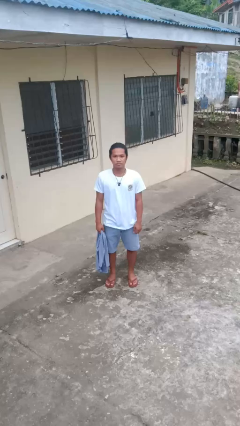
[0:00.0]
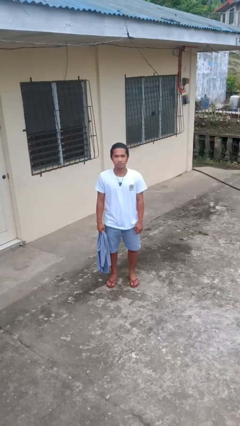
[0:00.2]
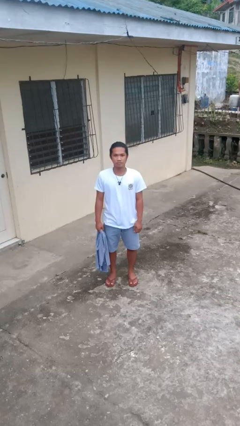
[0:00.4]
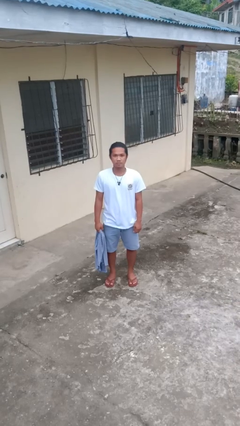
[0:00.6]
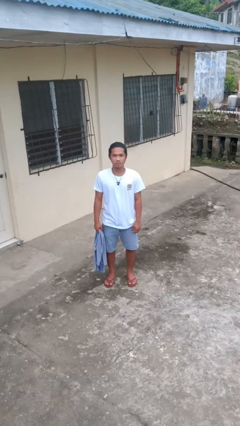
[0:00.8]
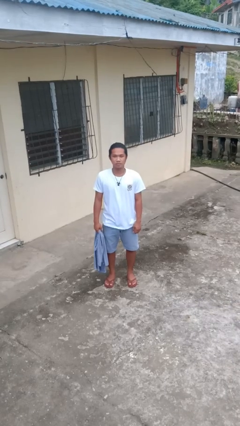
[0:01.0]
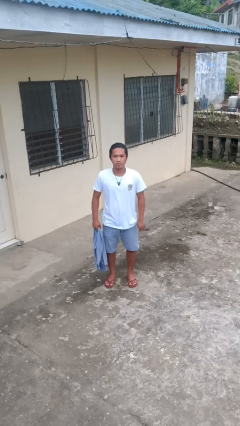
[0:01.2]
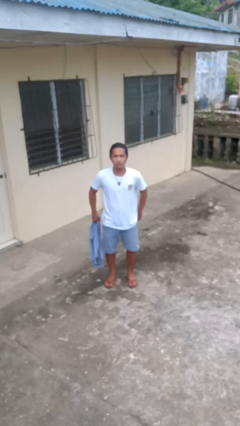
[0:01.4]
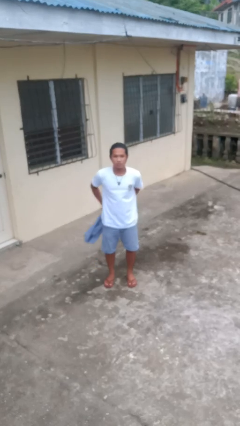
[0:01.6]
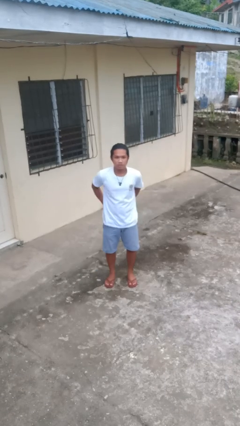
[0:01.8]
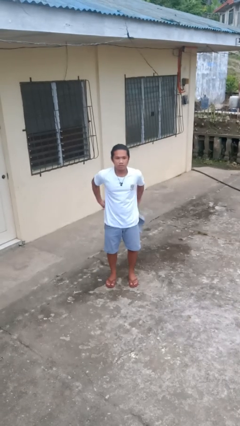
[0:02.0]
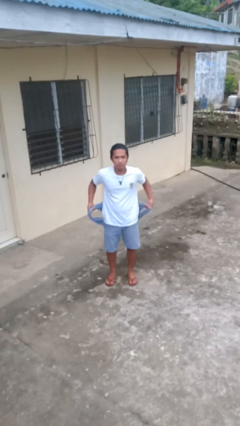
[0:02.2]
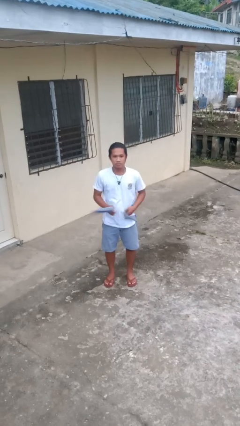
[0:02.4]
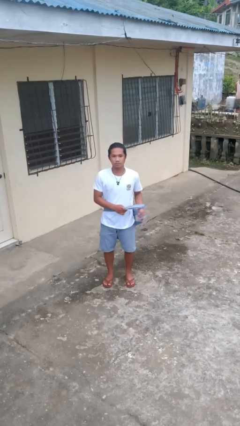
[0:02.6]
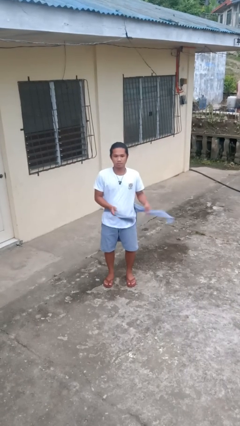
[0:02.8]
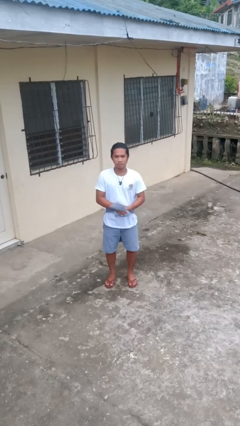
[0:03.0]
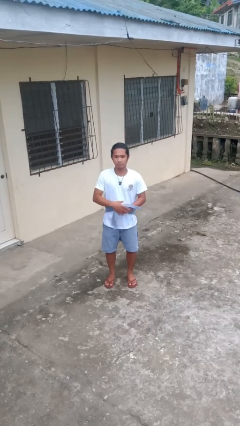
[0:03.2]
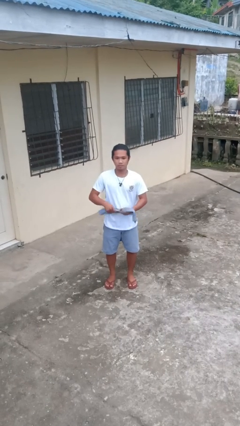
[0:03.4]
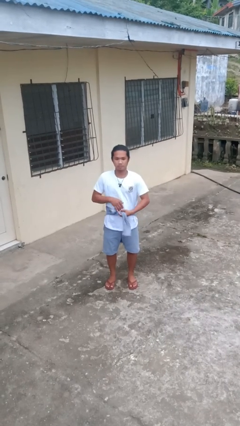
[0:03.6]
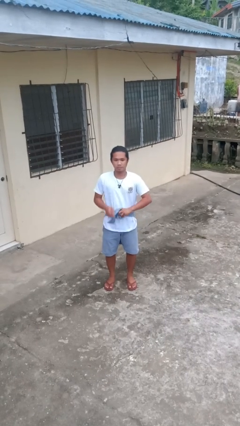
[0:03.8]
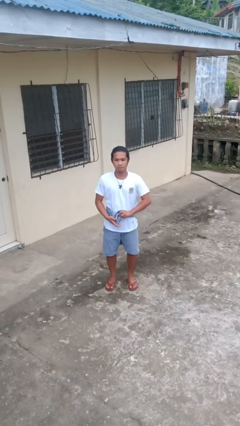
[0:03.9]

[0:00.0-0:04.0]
person ties jacket around waist

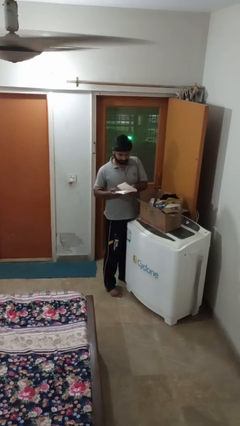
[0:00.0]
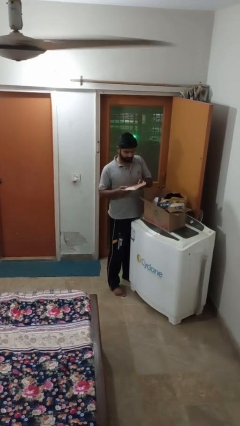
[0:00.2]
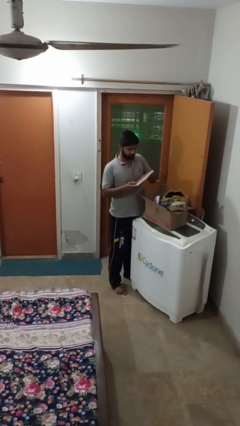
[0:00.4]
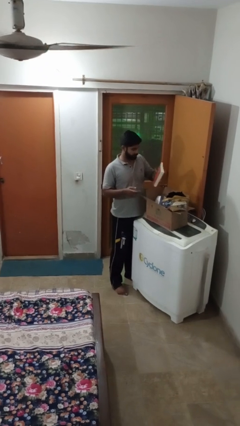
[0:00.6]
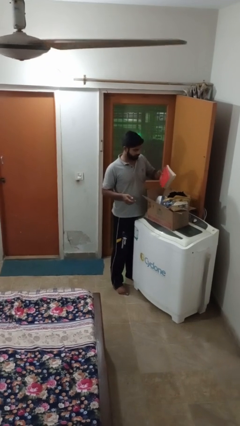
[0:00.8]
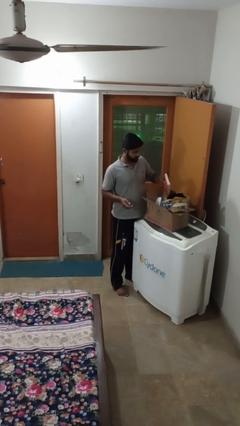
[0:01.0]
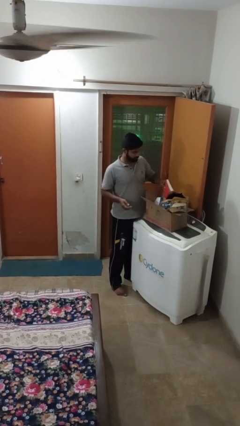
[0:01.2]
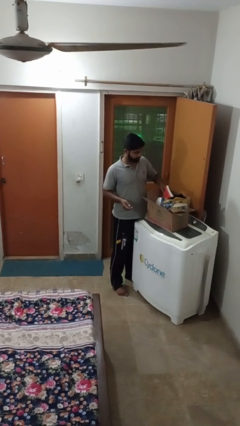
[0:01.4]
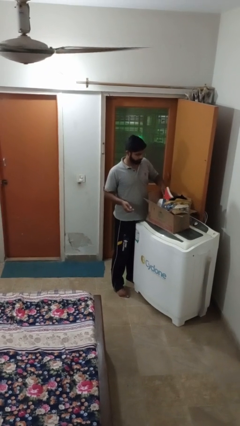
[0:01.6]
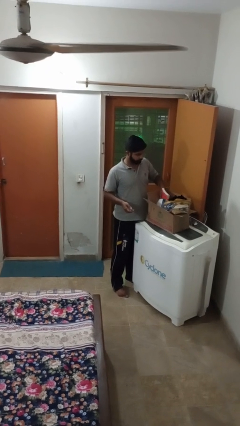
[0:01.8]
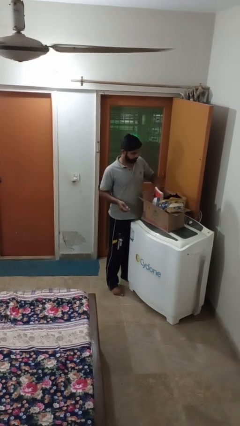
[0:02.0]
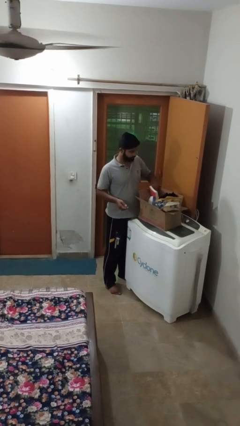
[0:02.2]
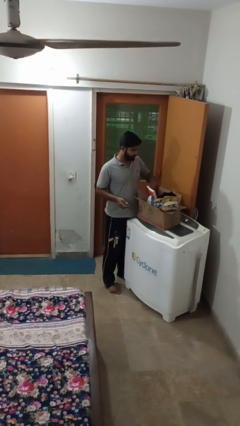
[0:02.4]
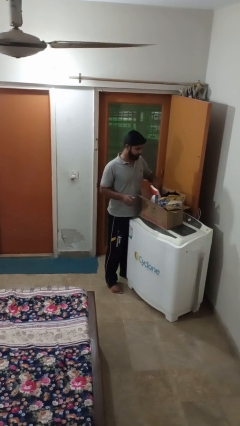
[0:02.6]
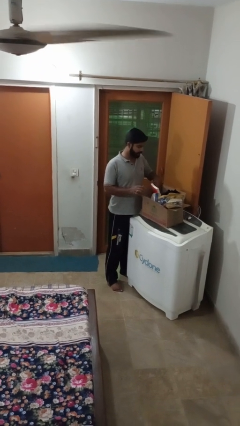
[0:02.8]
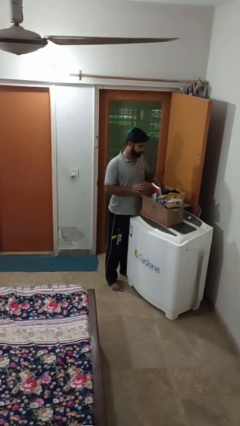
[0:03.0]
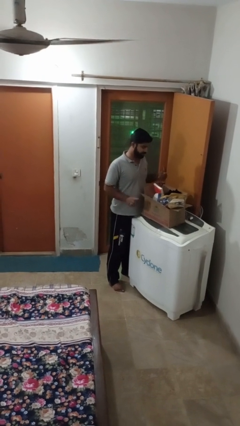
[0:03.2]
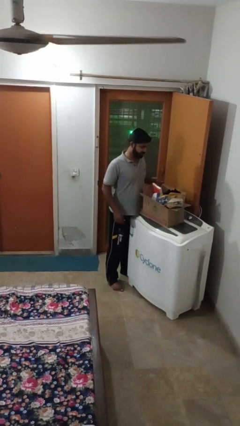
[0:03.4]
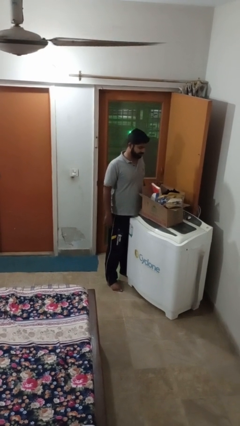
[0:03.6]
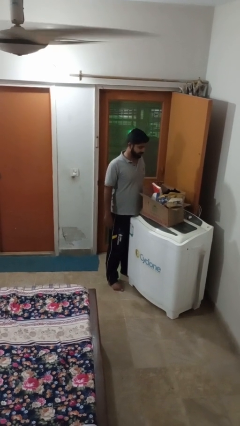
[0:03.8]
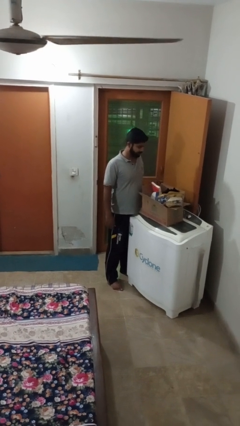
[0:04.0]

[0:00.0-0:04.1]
person puts object into box

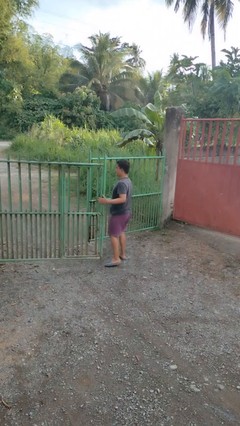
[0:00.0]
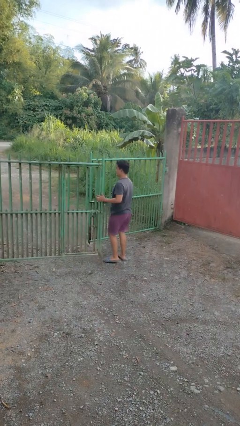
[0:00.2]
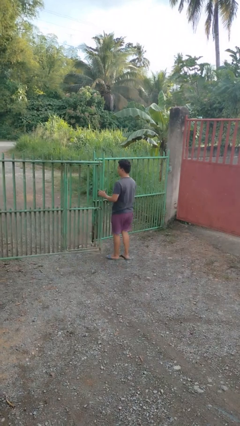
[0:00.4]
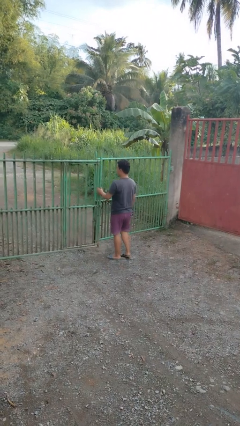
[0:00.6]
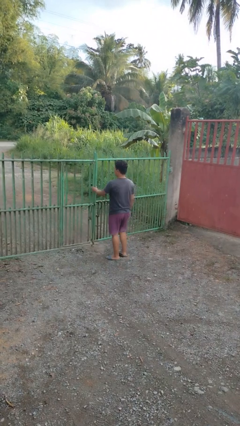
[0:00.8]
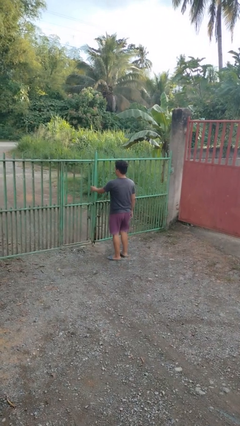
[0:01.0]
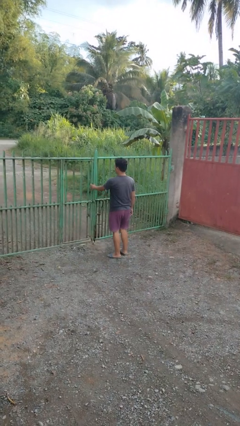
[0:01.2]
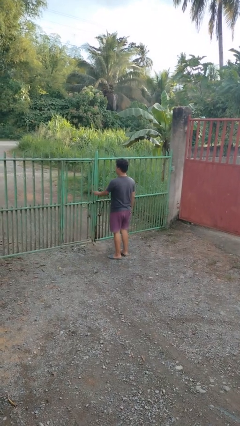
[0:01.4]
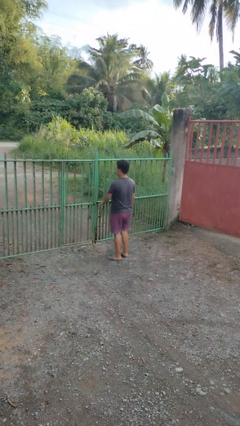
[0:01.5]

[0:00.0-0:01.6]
person closes gate

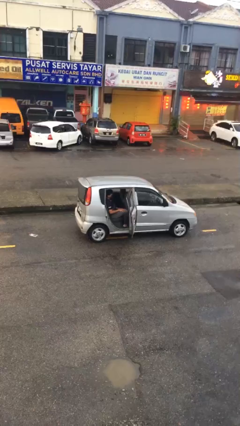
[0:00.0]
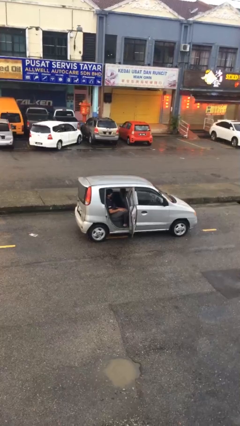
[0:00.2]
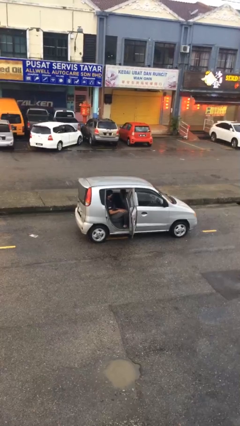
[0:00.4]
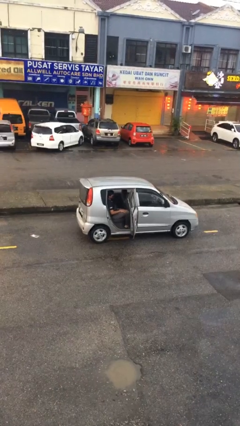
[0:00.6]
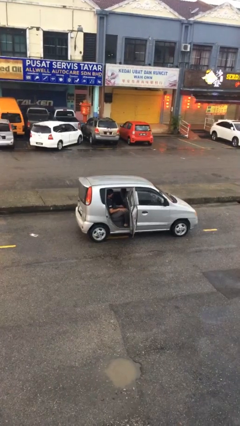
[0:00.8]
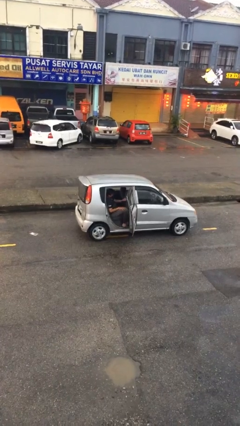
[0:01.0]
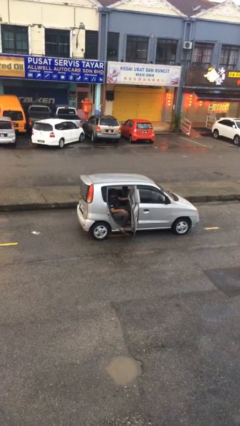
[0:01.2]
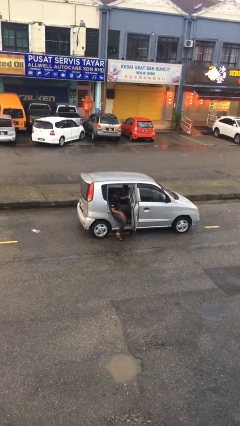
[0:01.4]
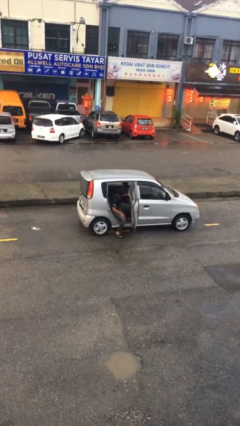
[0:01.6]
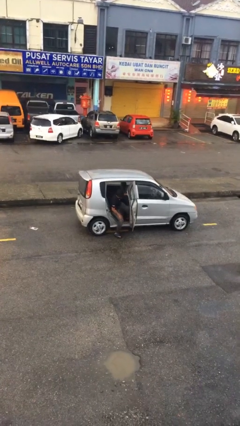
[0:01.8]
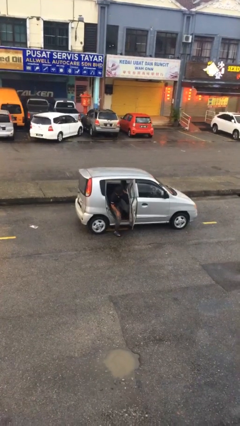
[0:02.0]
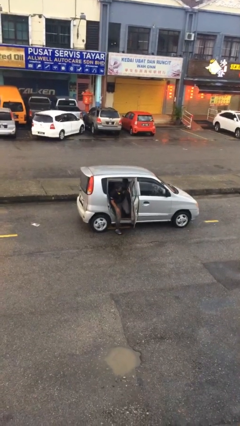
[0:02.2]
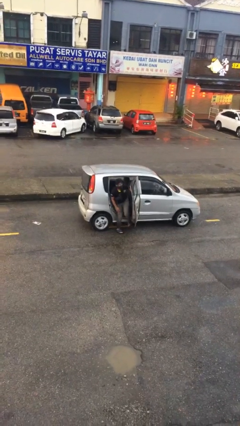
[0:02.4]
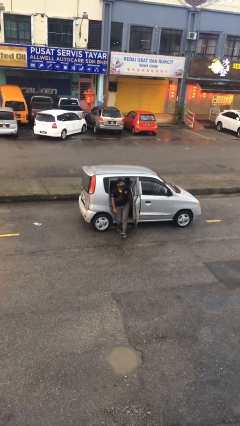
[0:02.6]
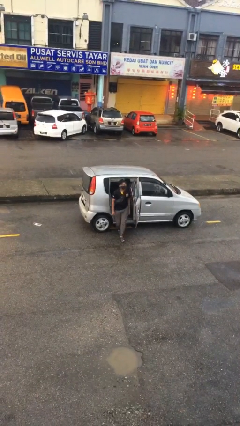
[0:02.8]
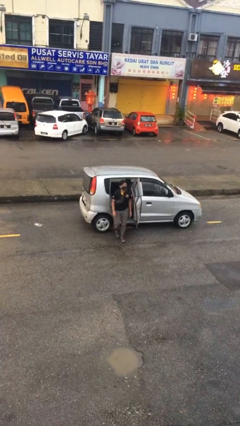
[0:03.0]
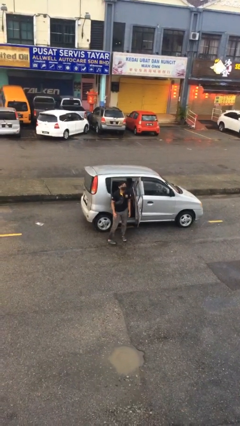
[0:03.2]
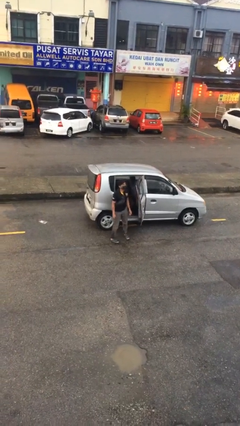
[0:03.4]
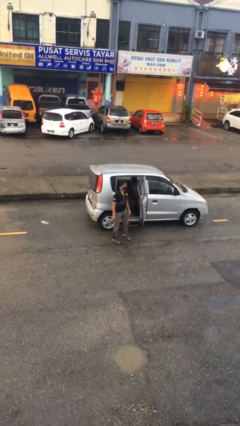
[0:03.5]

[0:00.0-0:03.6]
person exits car

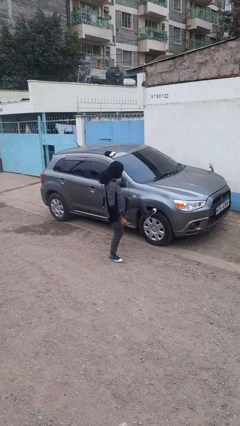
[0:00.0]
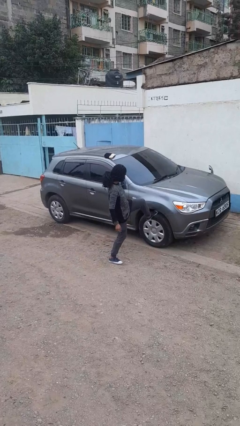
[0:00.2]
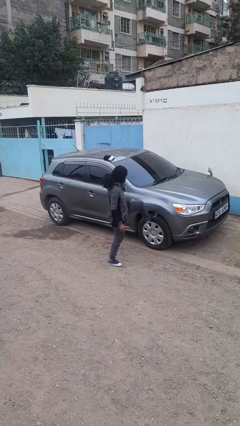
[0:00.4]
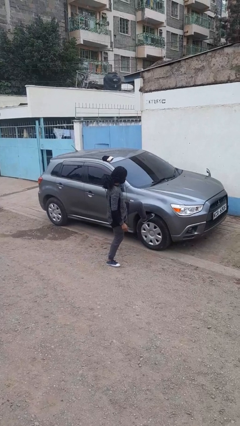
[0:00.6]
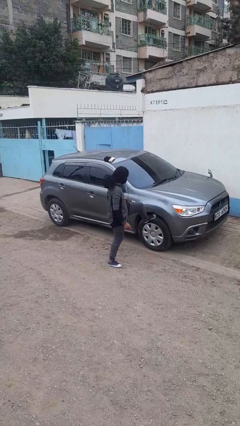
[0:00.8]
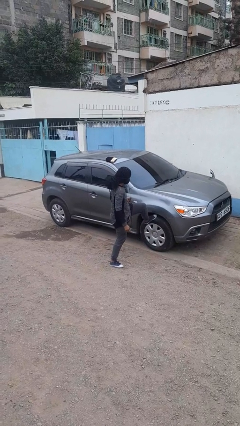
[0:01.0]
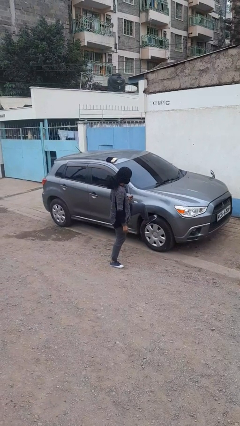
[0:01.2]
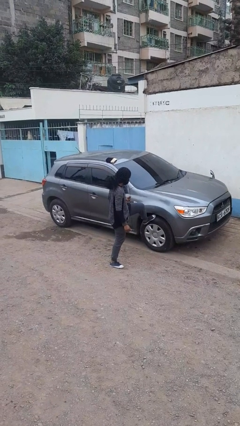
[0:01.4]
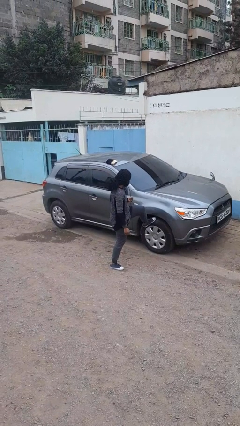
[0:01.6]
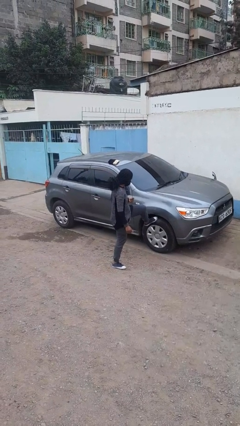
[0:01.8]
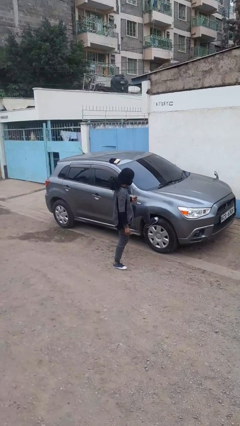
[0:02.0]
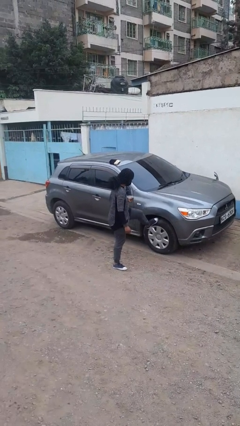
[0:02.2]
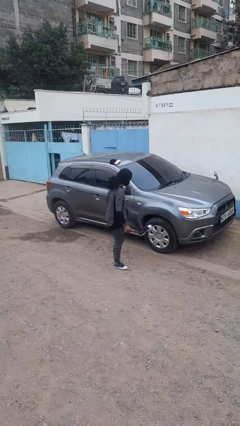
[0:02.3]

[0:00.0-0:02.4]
person kicks car tires

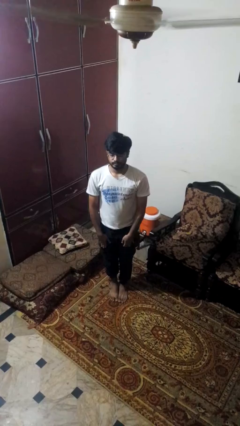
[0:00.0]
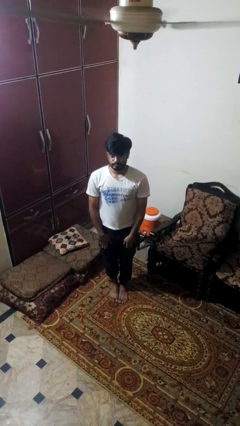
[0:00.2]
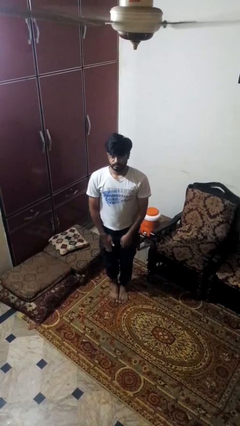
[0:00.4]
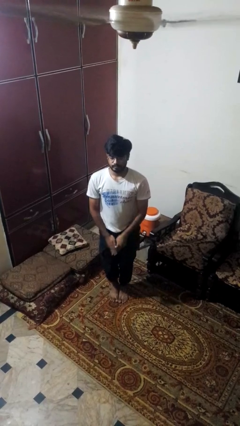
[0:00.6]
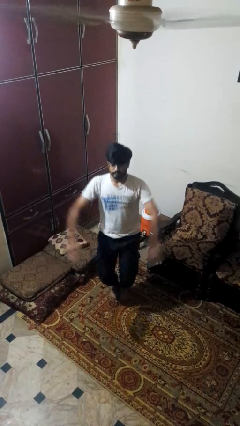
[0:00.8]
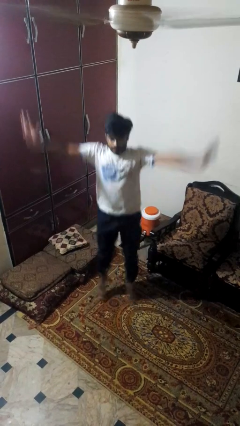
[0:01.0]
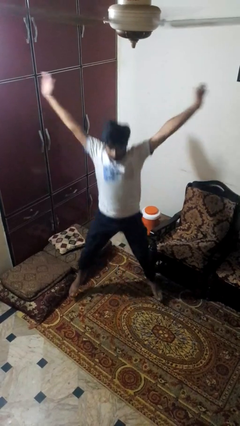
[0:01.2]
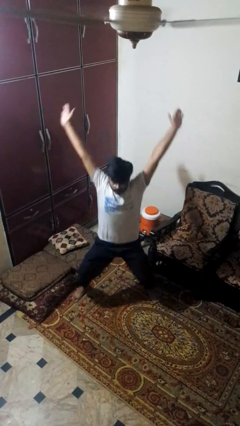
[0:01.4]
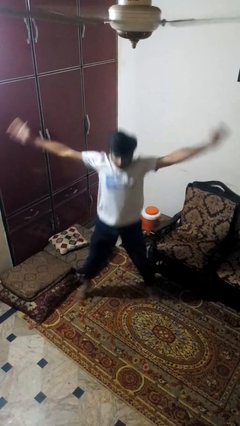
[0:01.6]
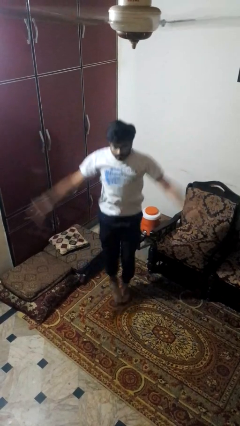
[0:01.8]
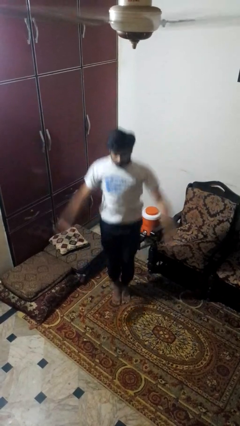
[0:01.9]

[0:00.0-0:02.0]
person exercises with jumping jacks
